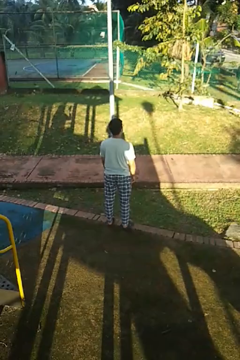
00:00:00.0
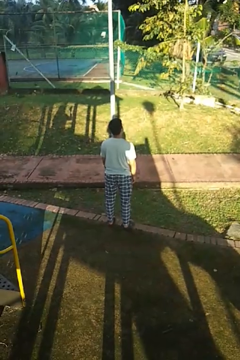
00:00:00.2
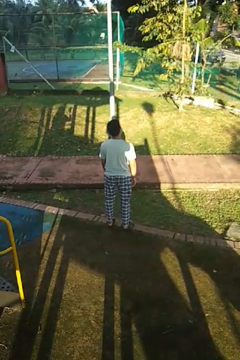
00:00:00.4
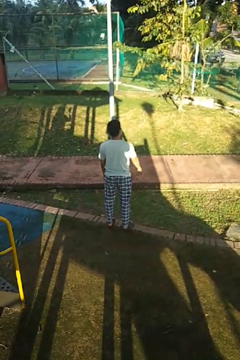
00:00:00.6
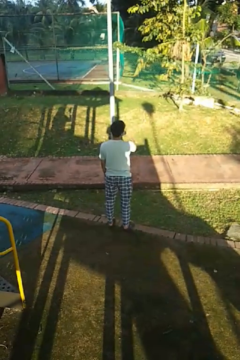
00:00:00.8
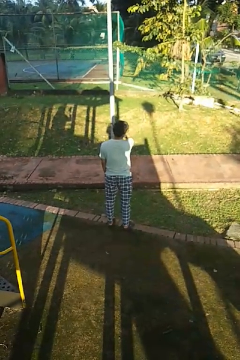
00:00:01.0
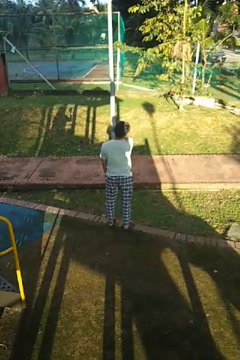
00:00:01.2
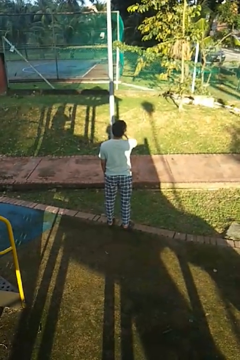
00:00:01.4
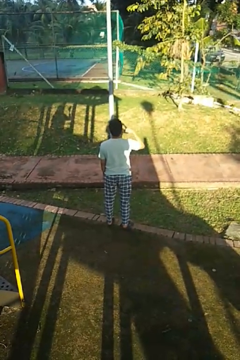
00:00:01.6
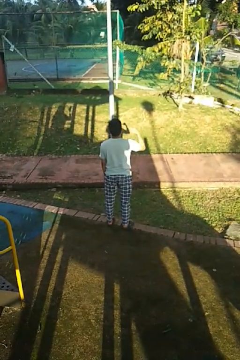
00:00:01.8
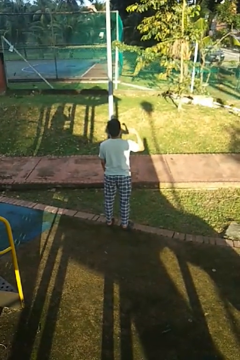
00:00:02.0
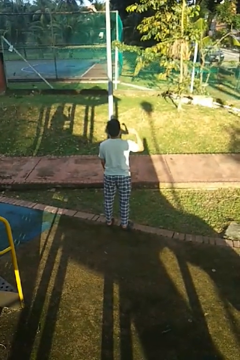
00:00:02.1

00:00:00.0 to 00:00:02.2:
person gestures cut

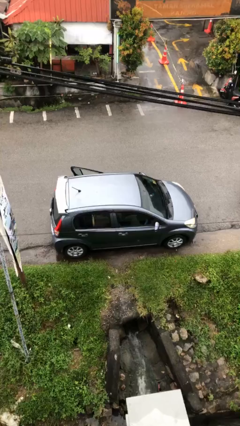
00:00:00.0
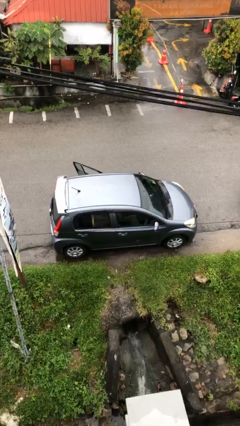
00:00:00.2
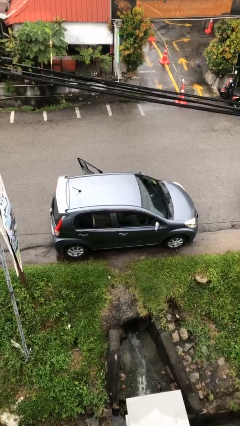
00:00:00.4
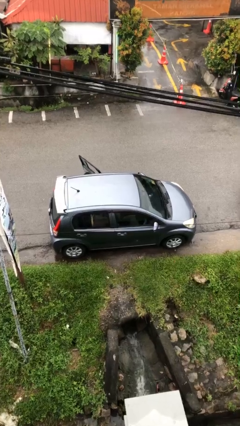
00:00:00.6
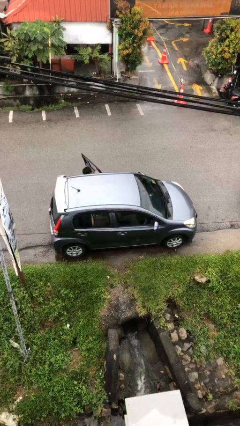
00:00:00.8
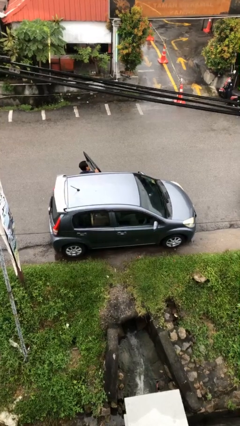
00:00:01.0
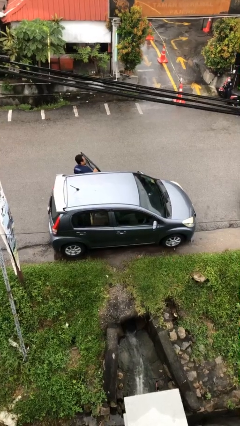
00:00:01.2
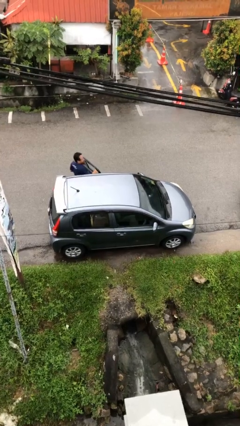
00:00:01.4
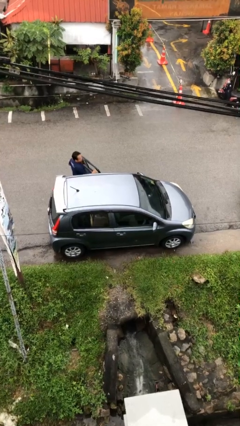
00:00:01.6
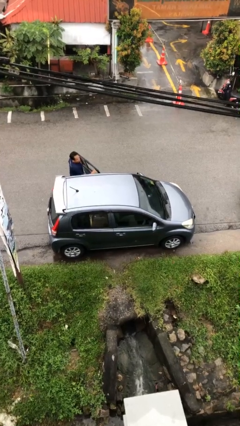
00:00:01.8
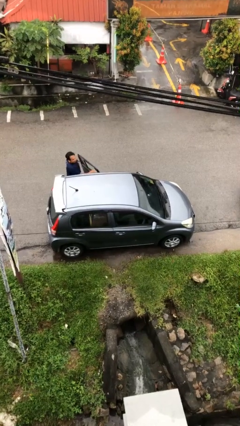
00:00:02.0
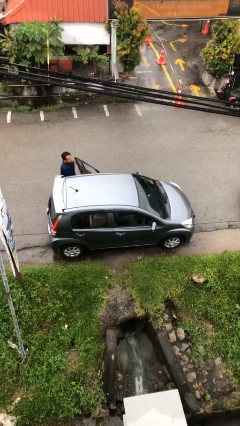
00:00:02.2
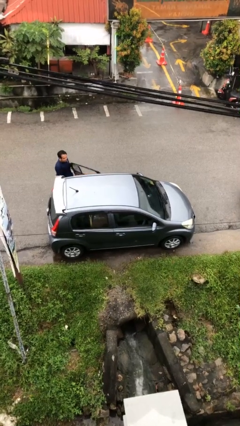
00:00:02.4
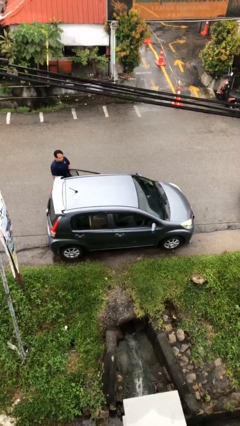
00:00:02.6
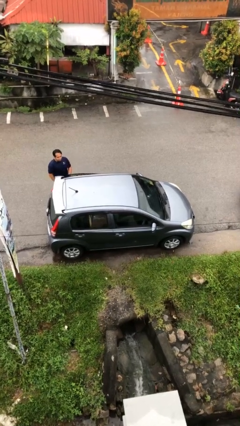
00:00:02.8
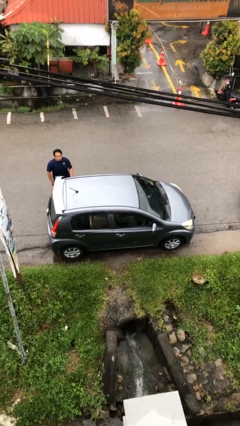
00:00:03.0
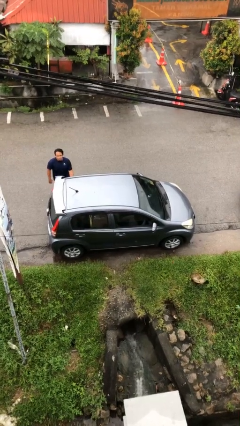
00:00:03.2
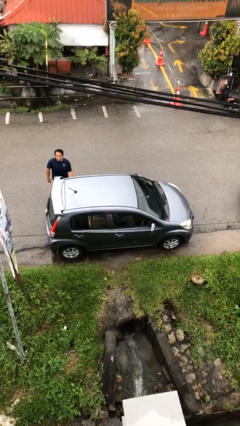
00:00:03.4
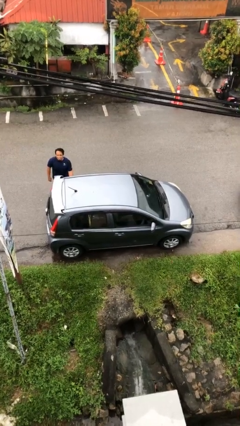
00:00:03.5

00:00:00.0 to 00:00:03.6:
car drops off person

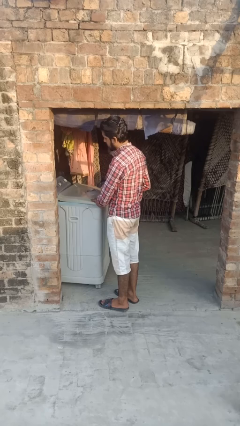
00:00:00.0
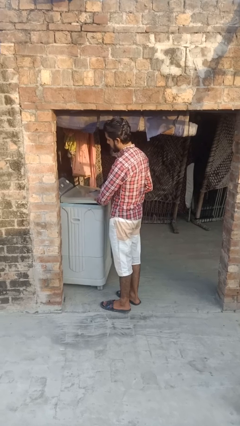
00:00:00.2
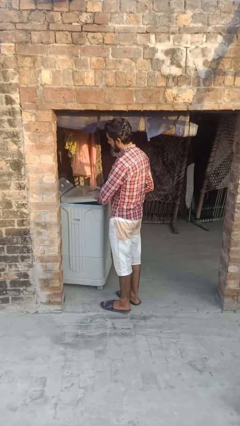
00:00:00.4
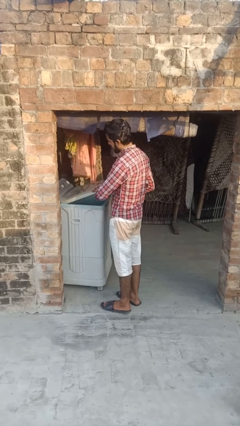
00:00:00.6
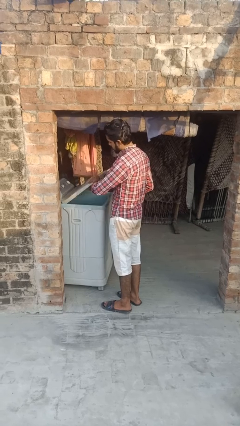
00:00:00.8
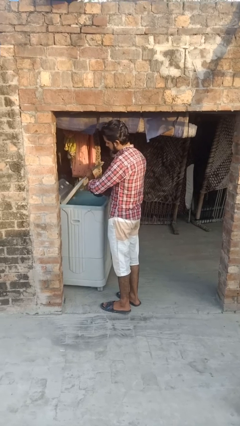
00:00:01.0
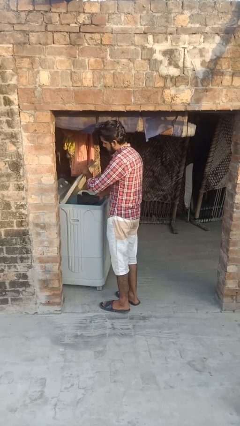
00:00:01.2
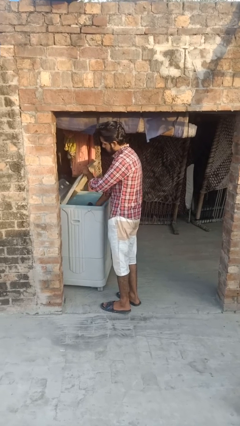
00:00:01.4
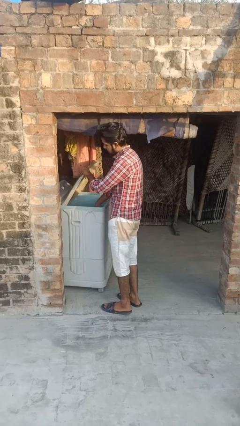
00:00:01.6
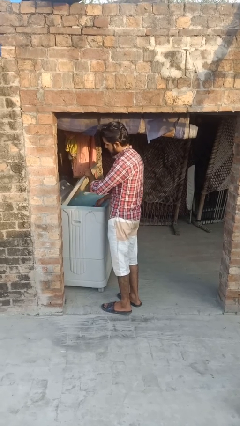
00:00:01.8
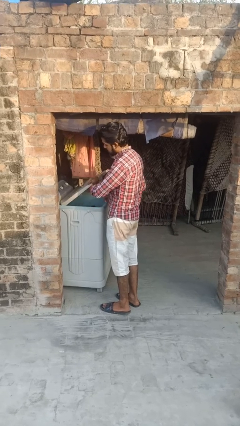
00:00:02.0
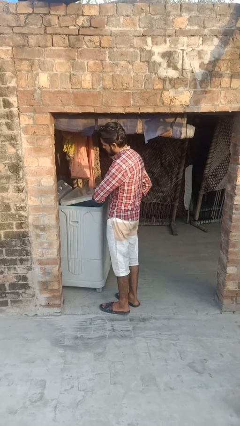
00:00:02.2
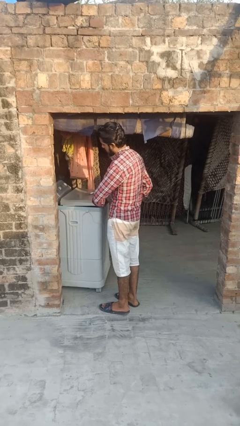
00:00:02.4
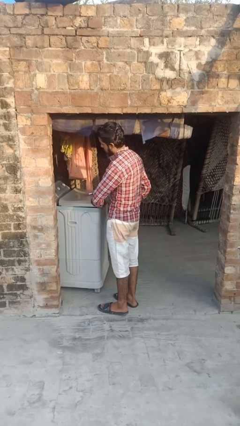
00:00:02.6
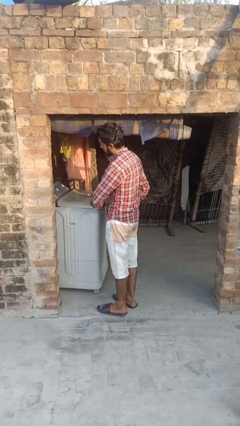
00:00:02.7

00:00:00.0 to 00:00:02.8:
person loads clotheswasher

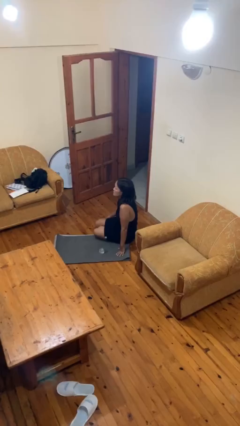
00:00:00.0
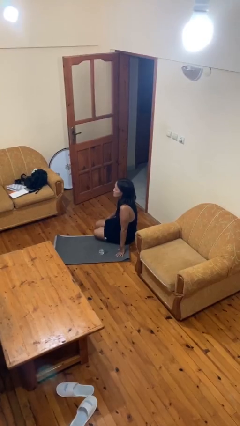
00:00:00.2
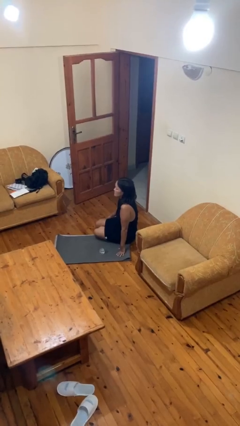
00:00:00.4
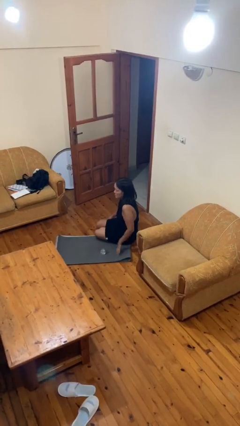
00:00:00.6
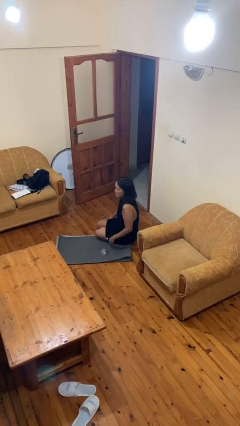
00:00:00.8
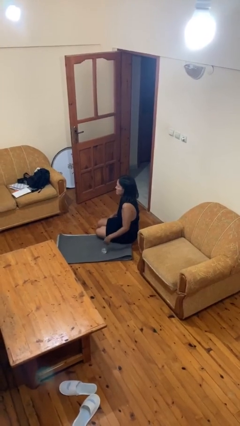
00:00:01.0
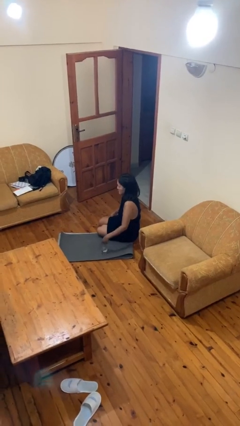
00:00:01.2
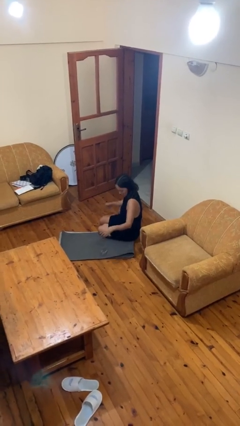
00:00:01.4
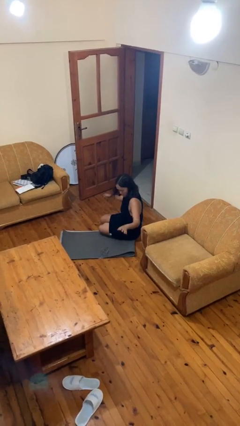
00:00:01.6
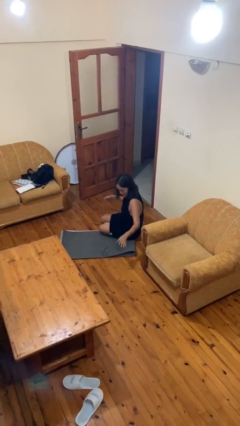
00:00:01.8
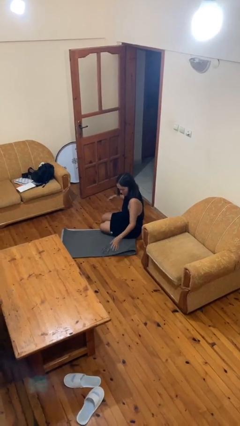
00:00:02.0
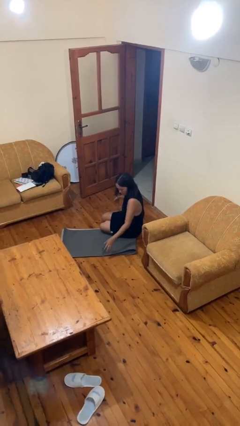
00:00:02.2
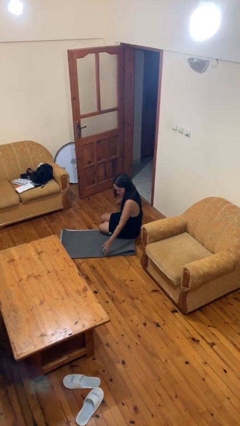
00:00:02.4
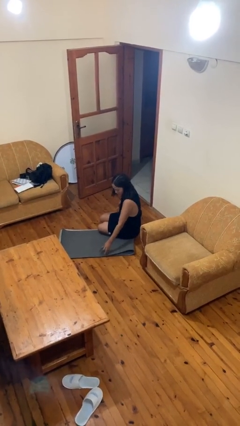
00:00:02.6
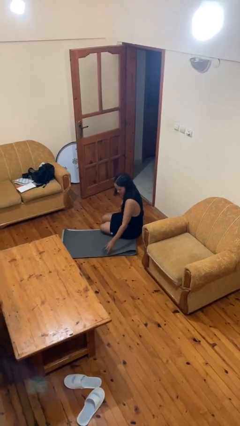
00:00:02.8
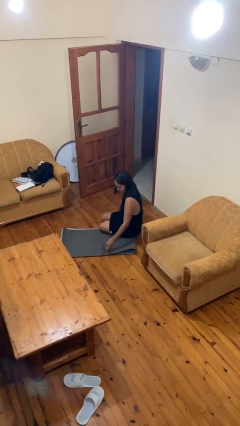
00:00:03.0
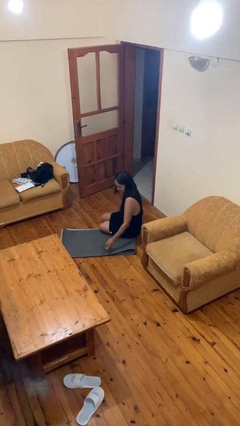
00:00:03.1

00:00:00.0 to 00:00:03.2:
person spills on floor

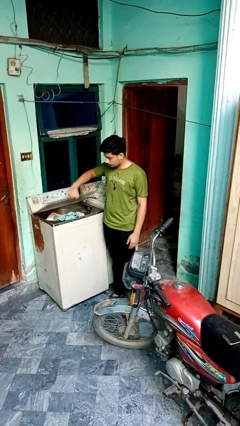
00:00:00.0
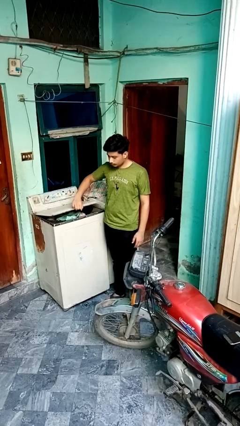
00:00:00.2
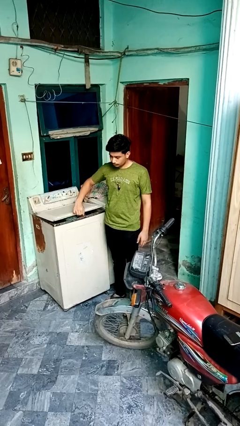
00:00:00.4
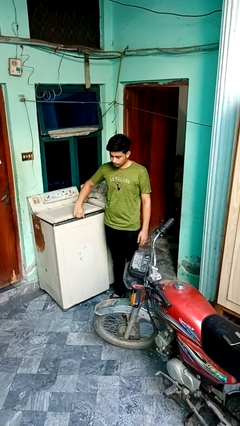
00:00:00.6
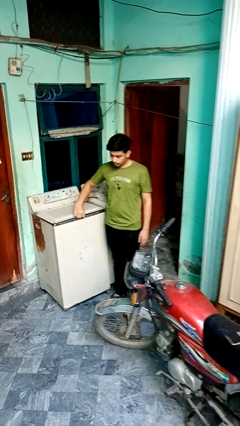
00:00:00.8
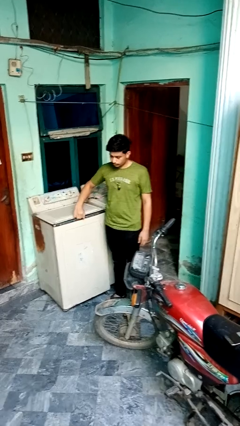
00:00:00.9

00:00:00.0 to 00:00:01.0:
person closes clothes washer

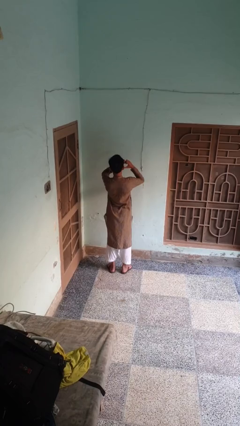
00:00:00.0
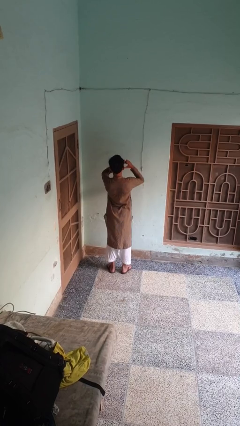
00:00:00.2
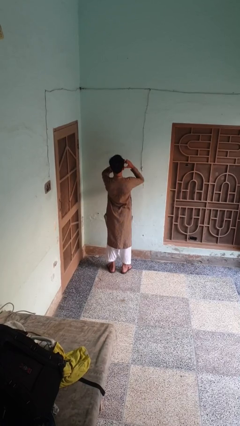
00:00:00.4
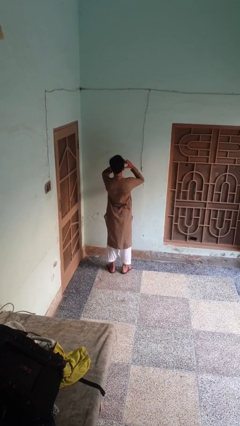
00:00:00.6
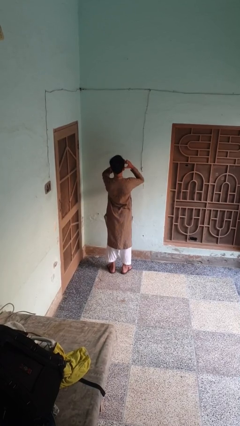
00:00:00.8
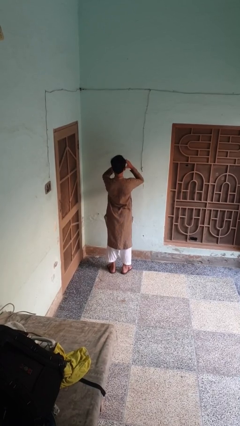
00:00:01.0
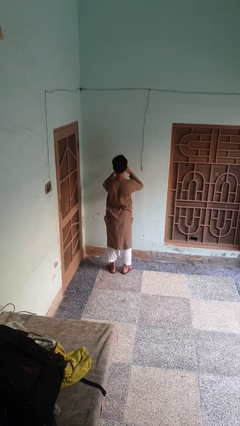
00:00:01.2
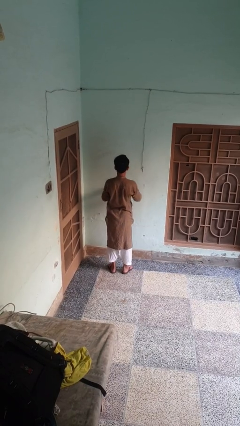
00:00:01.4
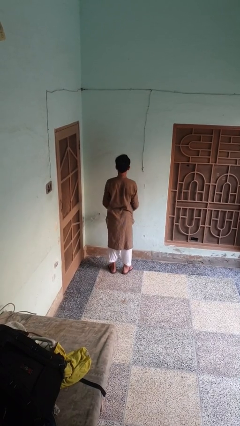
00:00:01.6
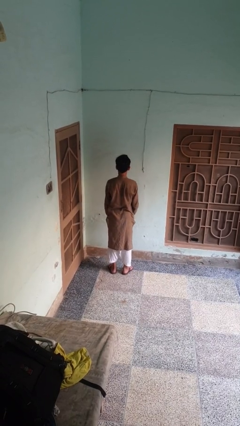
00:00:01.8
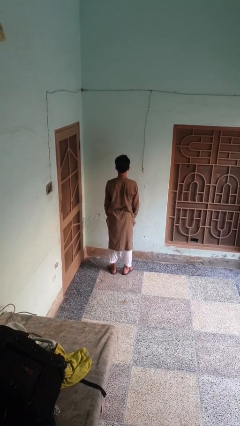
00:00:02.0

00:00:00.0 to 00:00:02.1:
person gestures heart

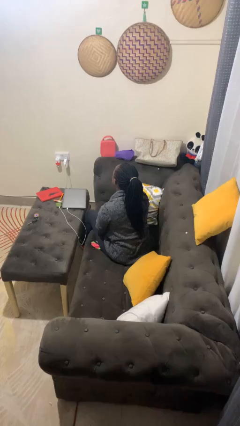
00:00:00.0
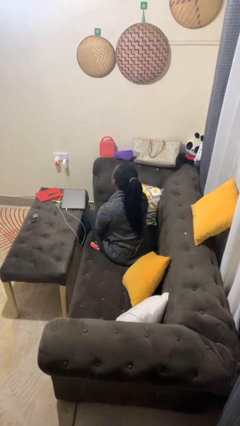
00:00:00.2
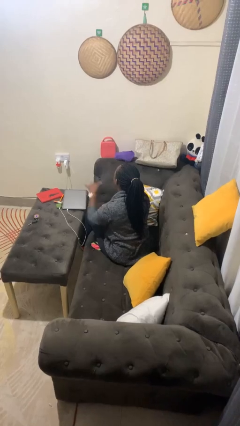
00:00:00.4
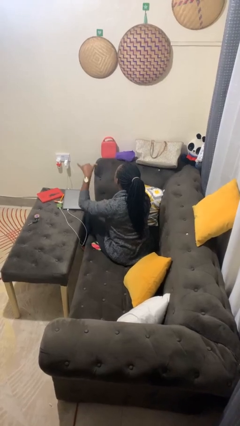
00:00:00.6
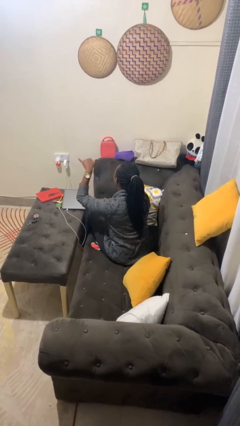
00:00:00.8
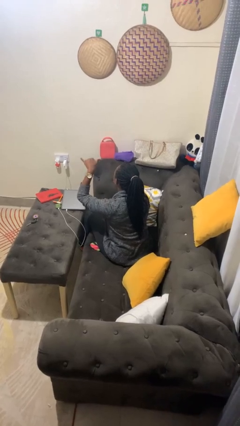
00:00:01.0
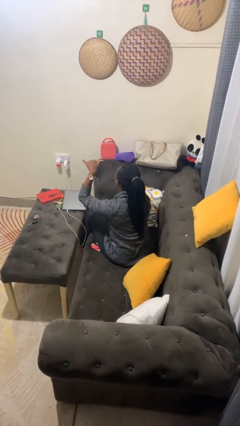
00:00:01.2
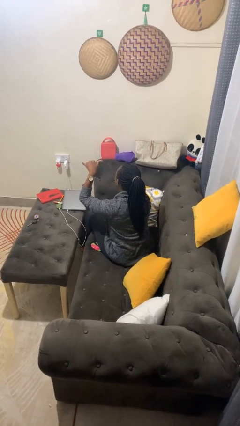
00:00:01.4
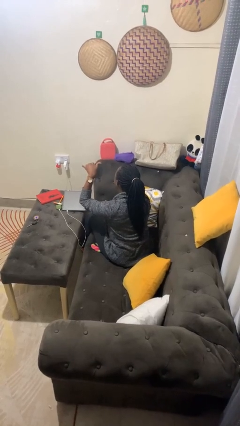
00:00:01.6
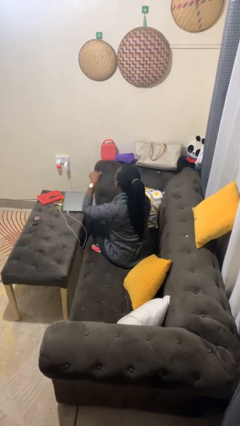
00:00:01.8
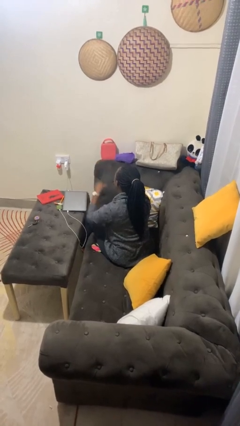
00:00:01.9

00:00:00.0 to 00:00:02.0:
person gestures hang loose

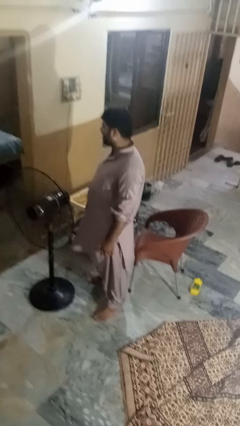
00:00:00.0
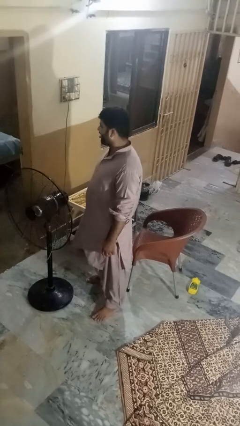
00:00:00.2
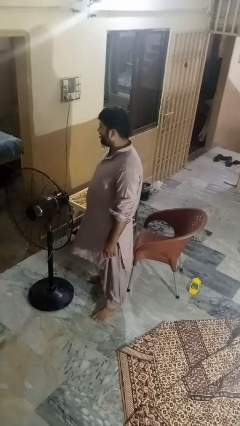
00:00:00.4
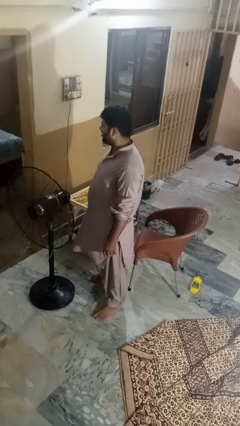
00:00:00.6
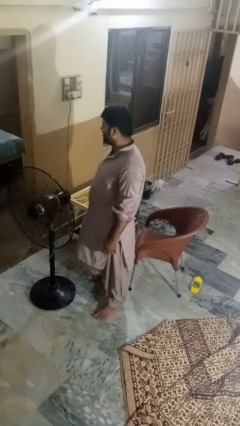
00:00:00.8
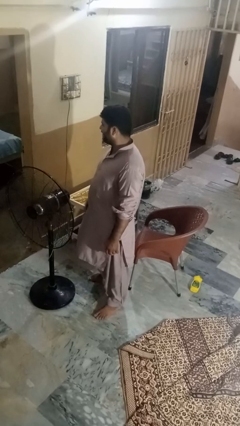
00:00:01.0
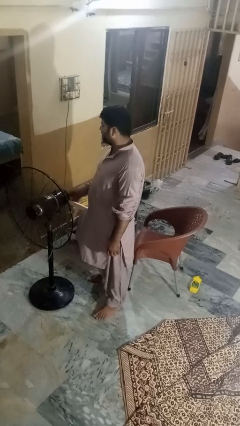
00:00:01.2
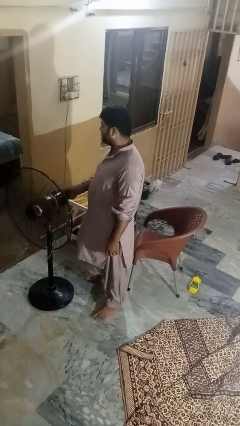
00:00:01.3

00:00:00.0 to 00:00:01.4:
person turns off fan
